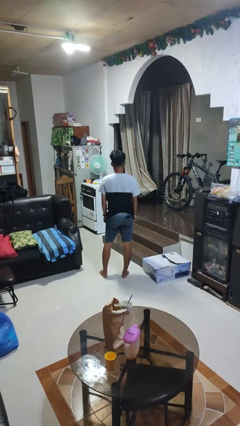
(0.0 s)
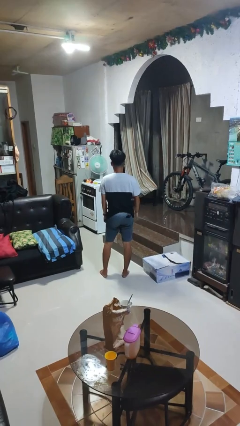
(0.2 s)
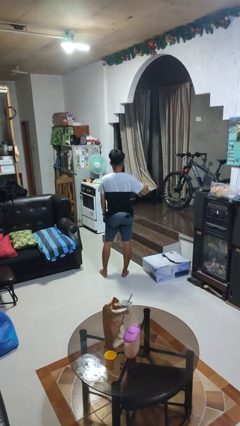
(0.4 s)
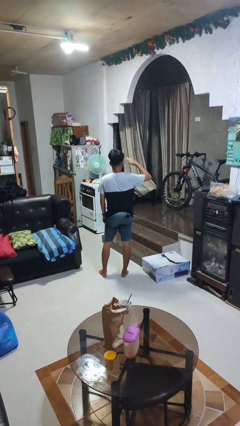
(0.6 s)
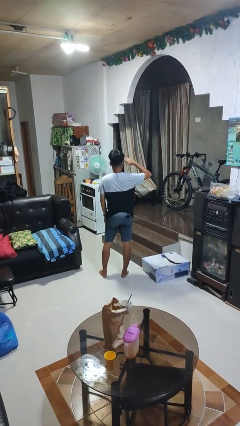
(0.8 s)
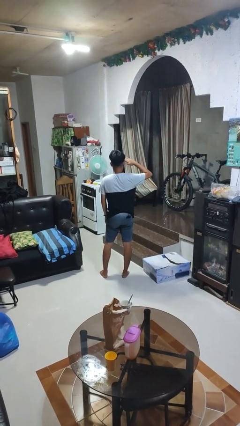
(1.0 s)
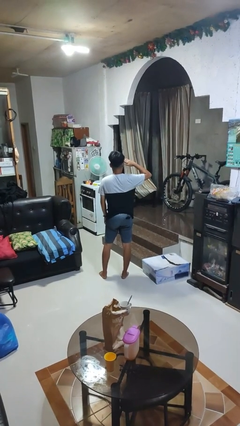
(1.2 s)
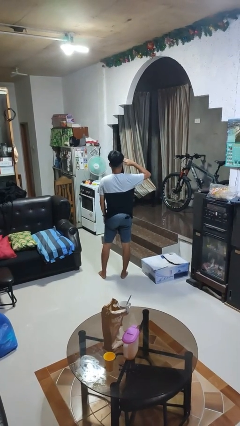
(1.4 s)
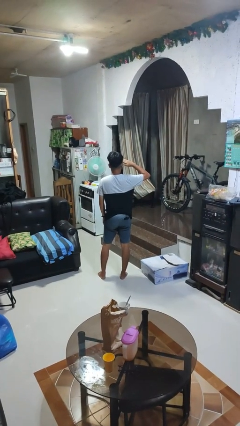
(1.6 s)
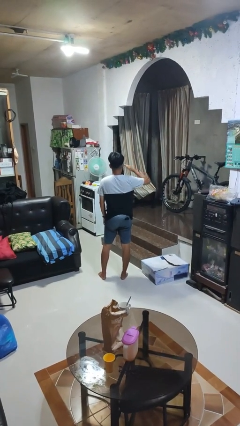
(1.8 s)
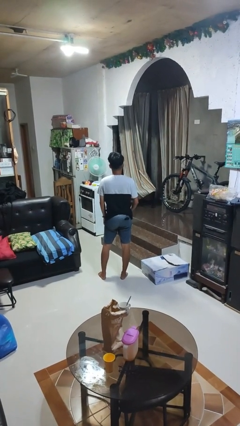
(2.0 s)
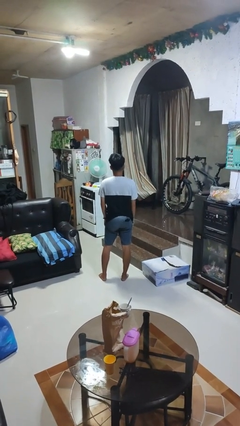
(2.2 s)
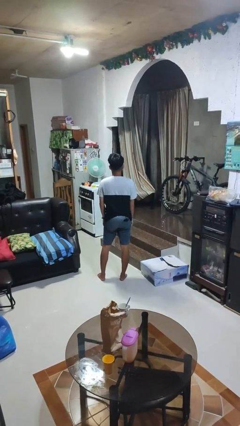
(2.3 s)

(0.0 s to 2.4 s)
person salutes

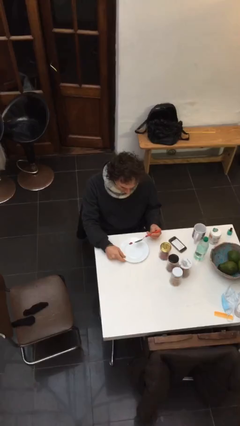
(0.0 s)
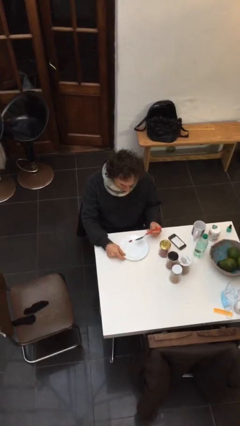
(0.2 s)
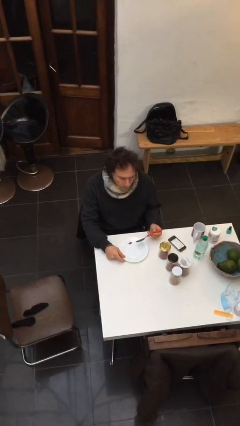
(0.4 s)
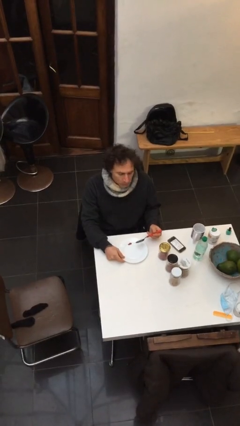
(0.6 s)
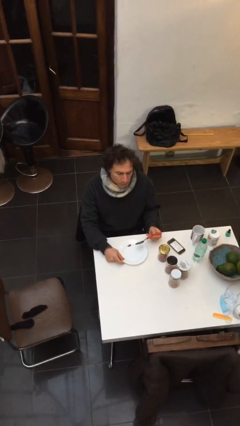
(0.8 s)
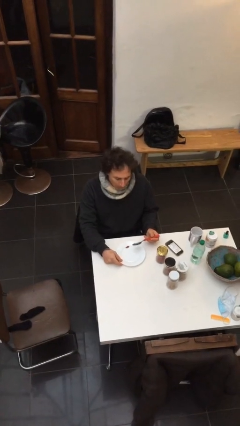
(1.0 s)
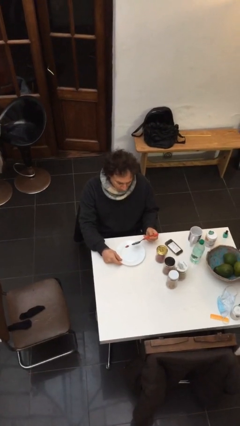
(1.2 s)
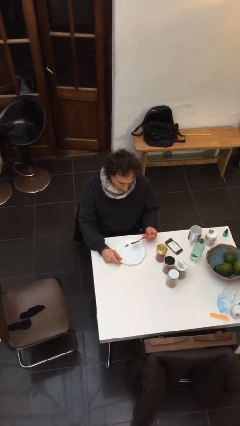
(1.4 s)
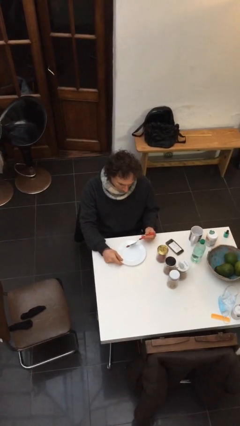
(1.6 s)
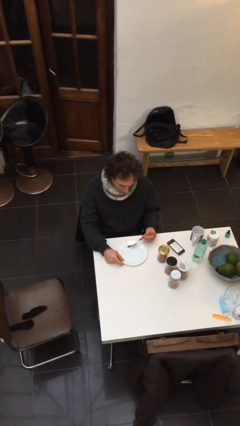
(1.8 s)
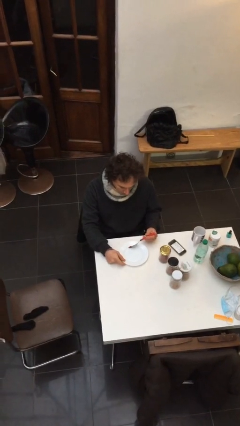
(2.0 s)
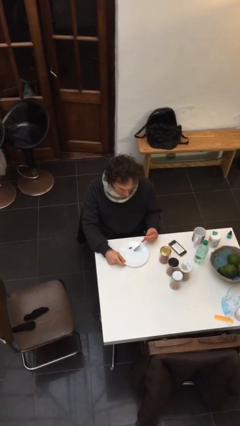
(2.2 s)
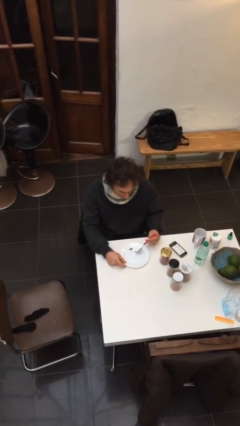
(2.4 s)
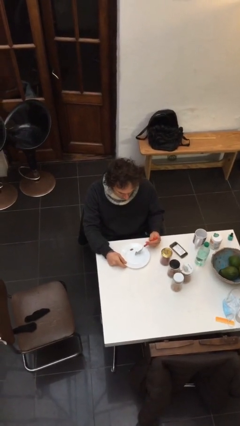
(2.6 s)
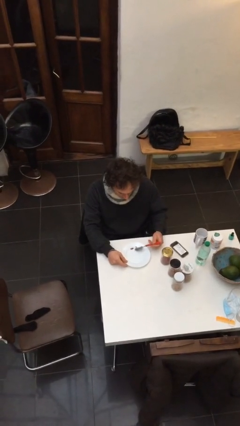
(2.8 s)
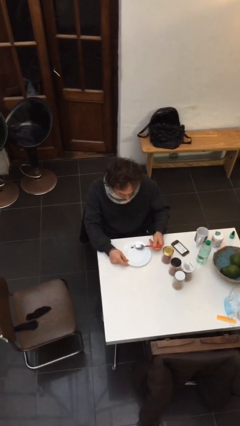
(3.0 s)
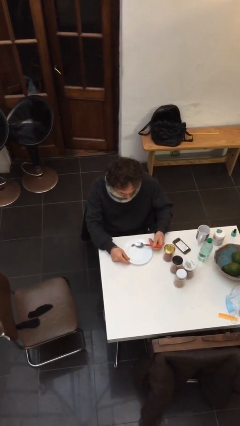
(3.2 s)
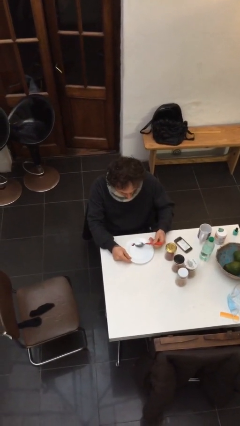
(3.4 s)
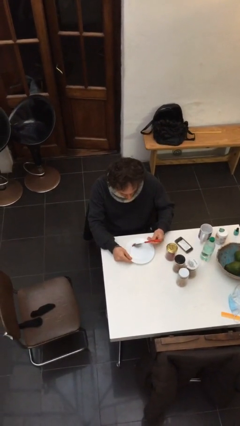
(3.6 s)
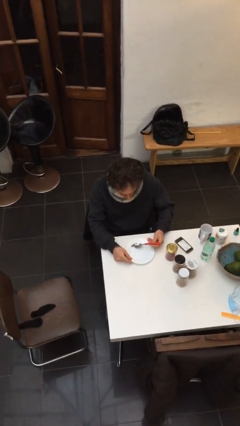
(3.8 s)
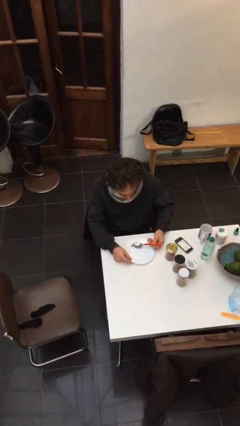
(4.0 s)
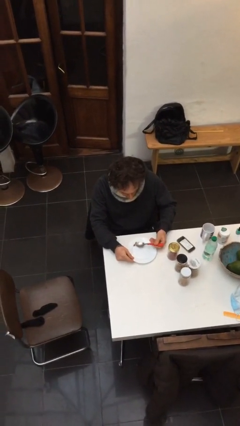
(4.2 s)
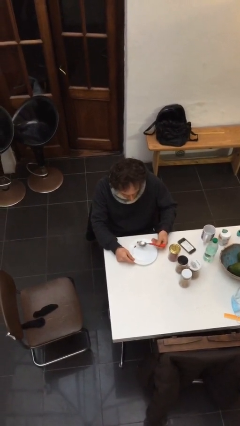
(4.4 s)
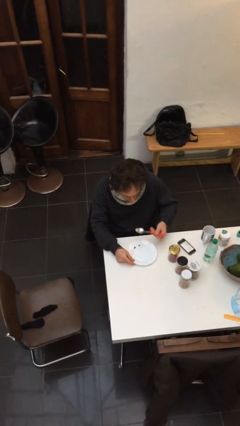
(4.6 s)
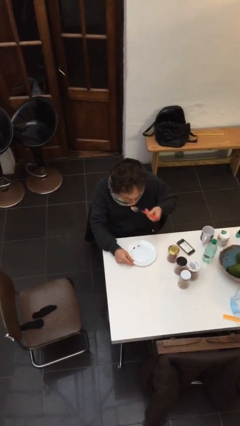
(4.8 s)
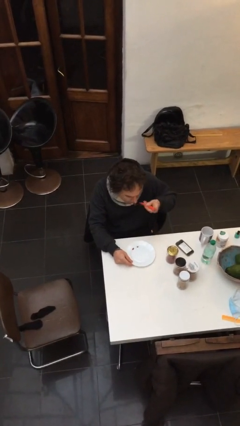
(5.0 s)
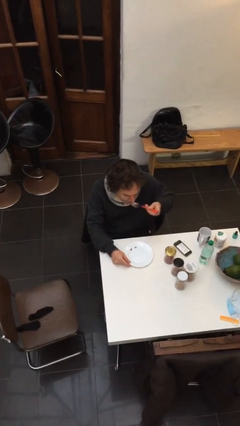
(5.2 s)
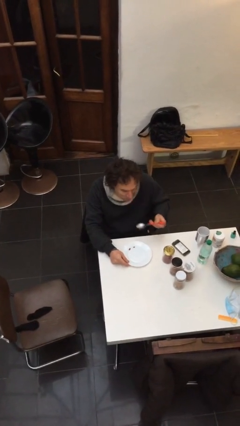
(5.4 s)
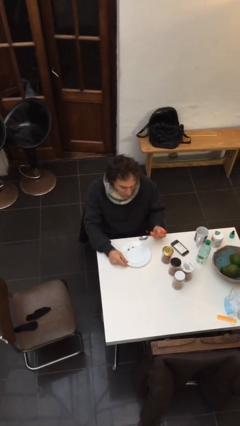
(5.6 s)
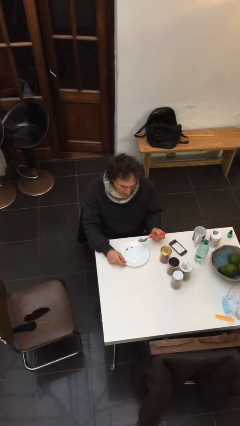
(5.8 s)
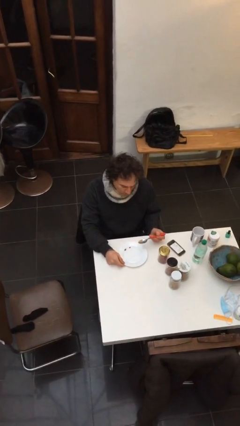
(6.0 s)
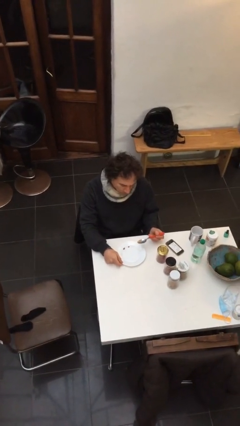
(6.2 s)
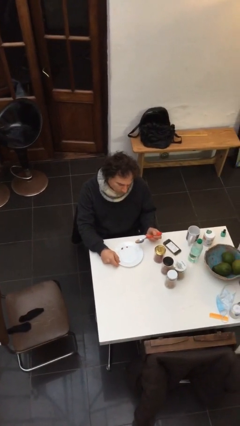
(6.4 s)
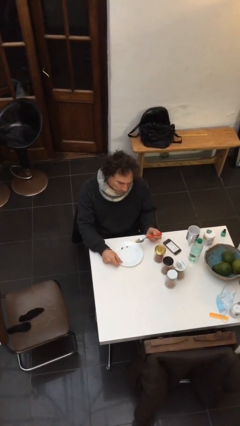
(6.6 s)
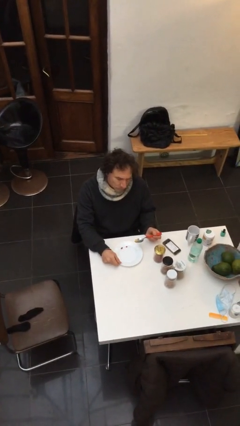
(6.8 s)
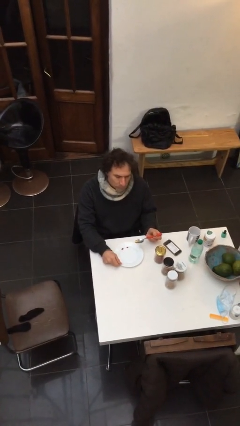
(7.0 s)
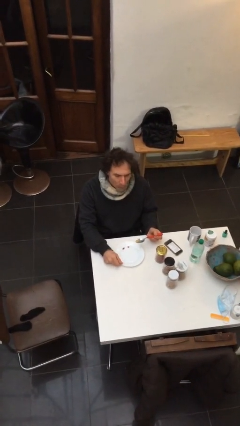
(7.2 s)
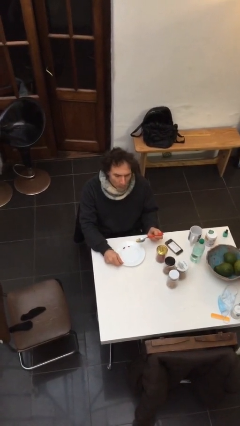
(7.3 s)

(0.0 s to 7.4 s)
person eats with utensil

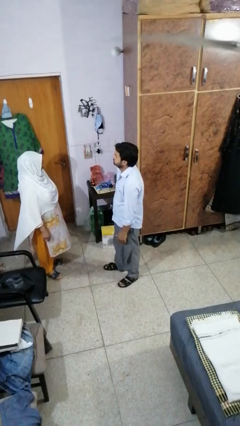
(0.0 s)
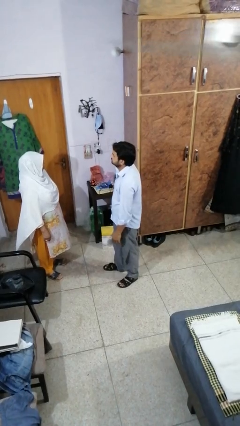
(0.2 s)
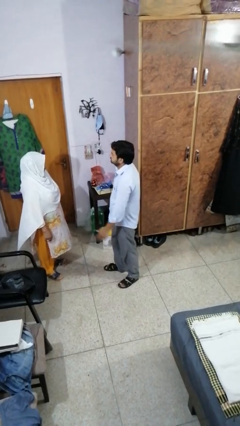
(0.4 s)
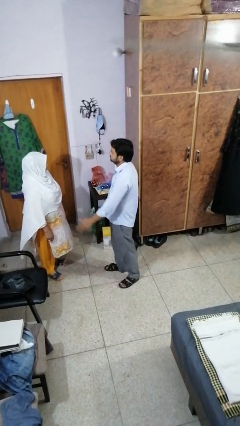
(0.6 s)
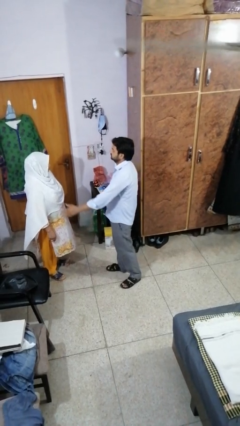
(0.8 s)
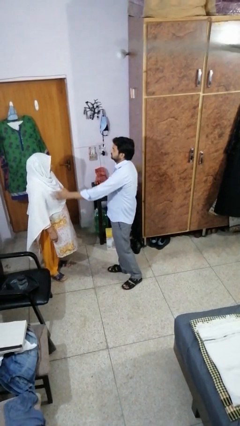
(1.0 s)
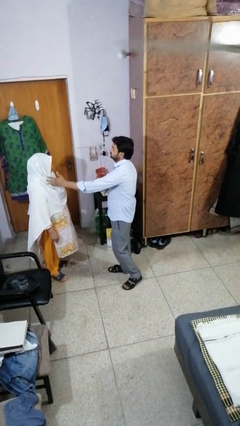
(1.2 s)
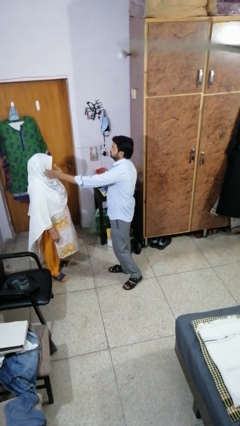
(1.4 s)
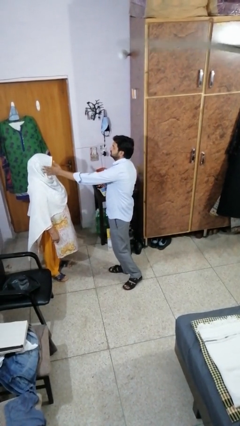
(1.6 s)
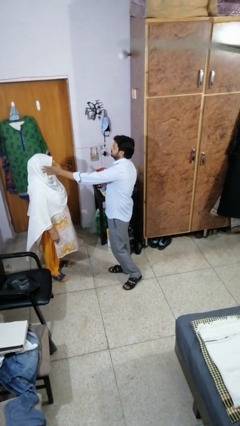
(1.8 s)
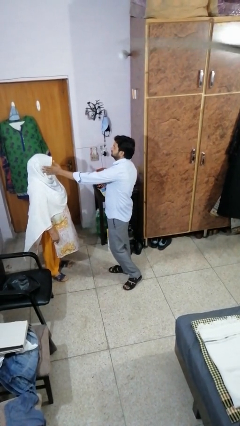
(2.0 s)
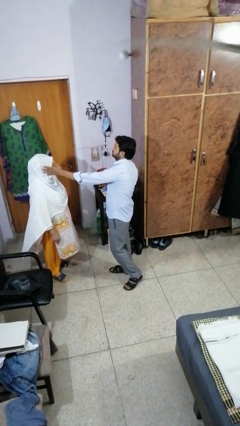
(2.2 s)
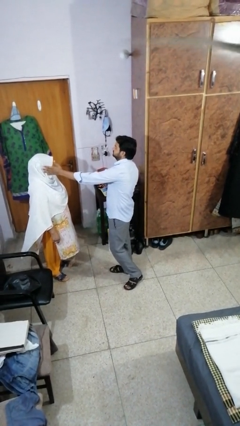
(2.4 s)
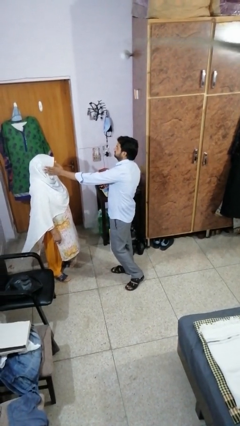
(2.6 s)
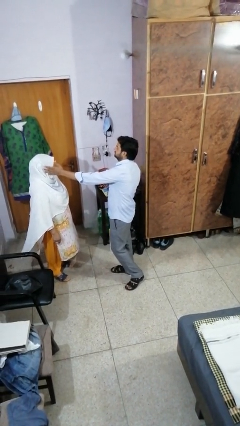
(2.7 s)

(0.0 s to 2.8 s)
person touches face of person

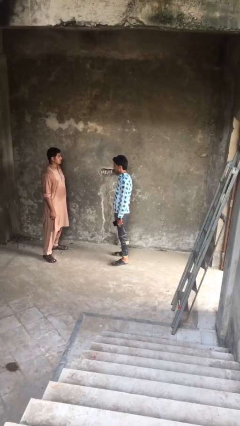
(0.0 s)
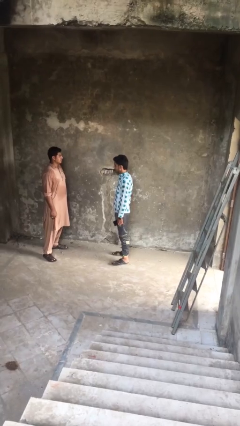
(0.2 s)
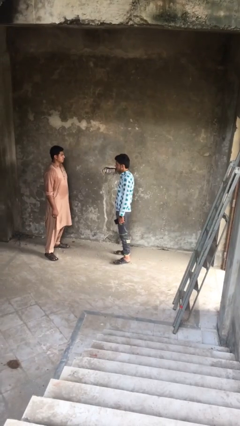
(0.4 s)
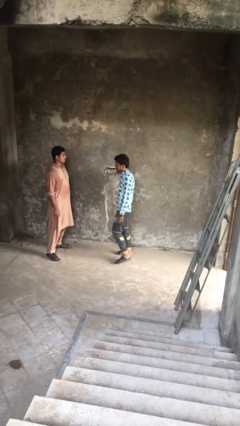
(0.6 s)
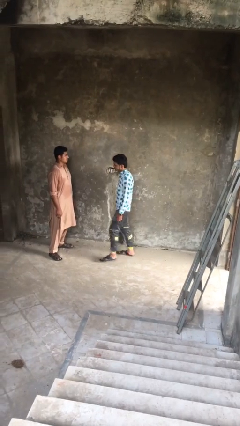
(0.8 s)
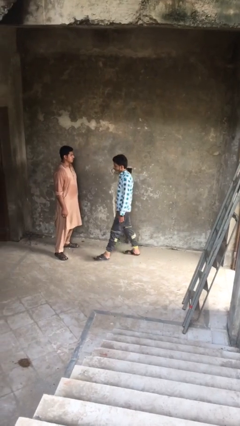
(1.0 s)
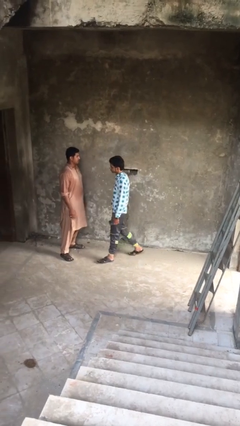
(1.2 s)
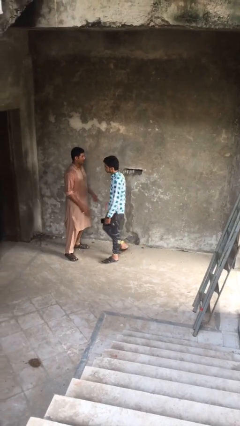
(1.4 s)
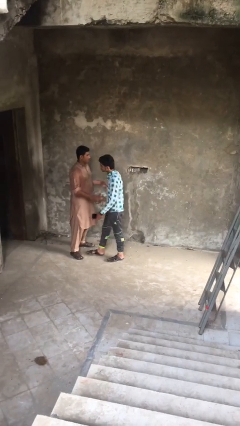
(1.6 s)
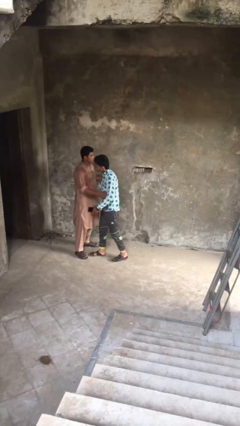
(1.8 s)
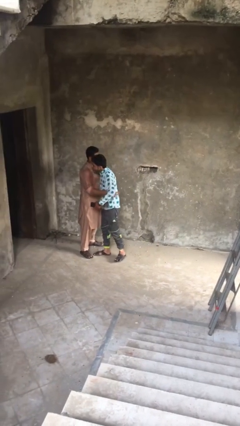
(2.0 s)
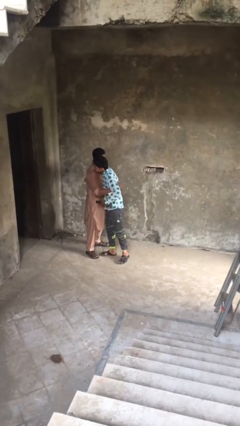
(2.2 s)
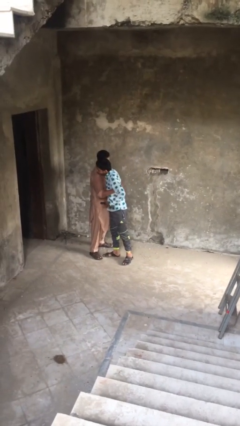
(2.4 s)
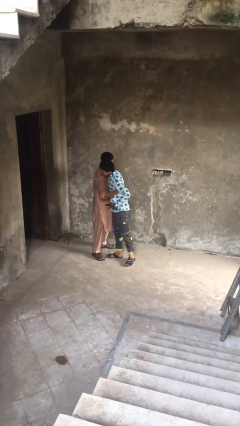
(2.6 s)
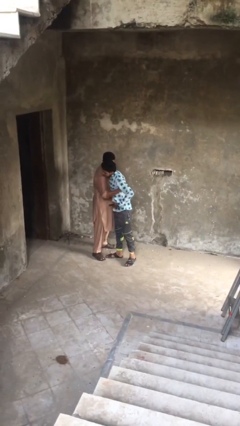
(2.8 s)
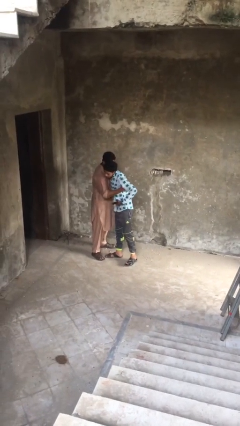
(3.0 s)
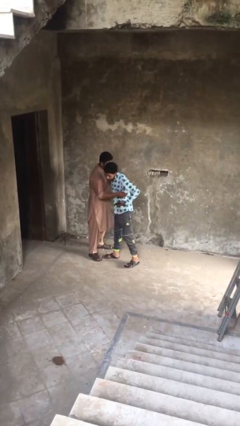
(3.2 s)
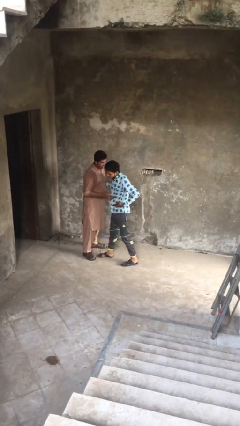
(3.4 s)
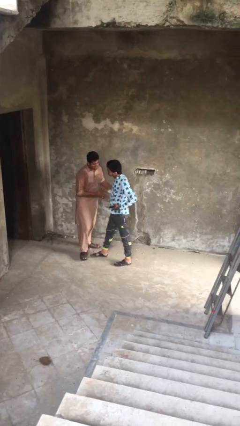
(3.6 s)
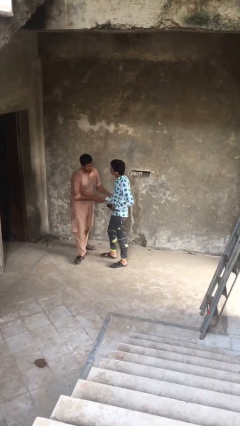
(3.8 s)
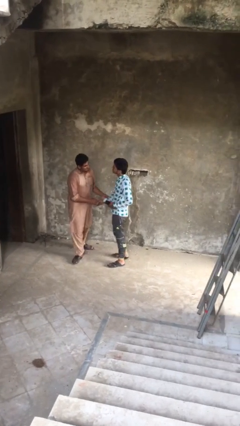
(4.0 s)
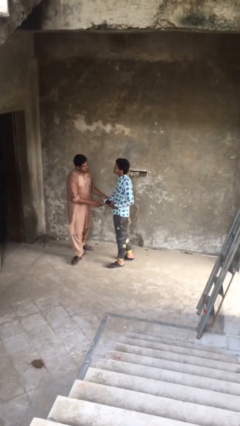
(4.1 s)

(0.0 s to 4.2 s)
person embraces person

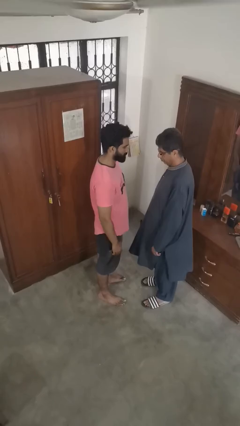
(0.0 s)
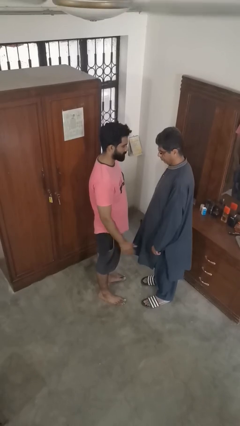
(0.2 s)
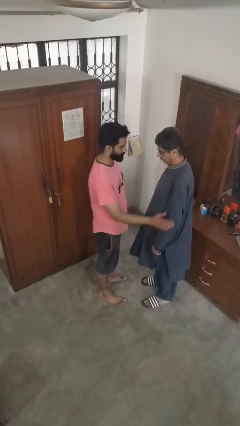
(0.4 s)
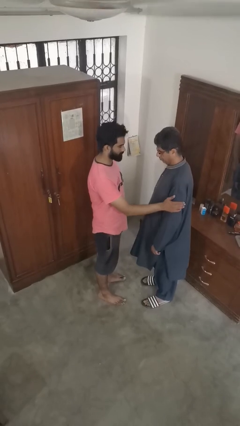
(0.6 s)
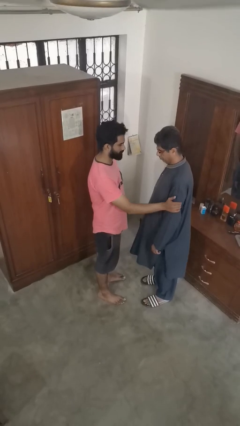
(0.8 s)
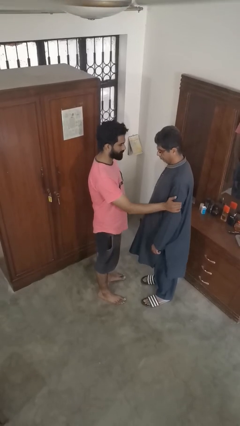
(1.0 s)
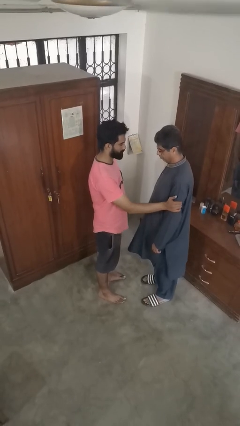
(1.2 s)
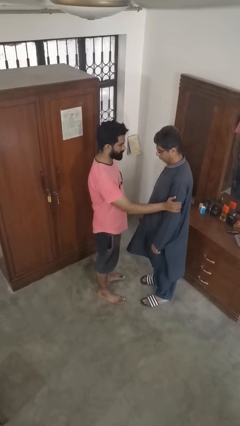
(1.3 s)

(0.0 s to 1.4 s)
person grabs person by bicep
